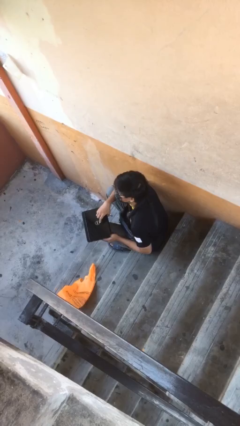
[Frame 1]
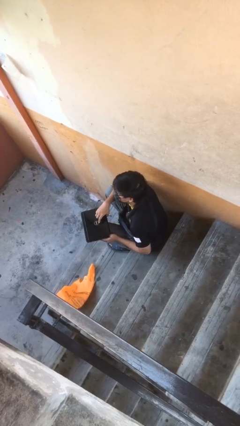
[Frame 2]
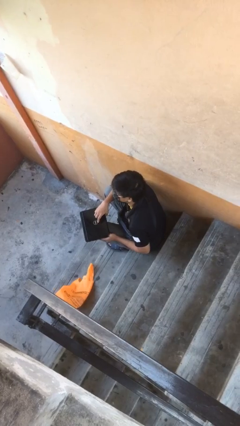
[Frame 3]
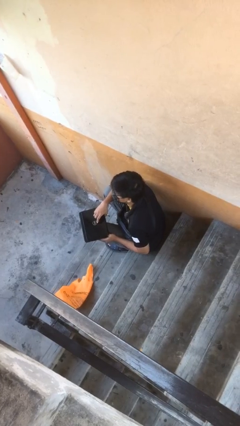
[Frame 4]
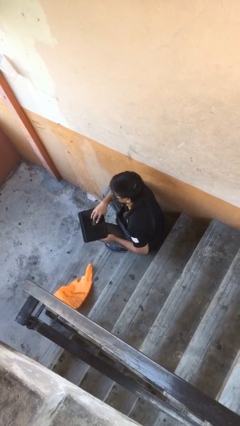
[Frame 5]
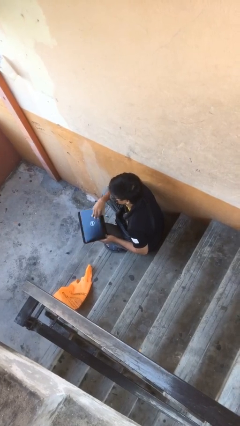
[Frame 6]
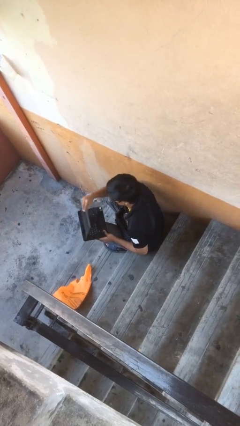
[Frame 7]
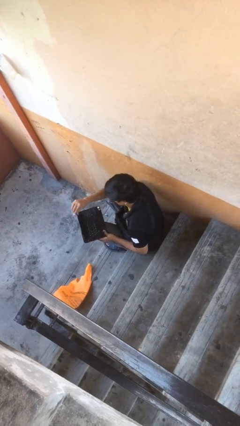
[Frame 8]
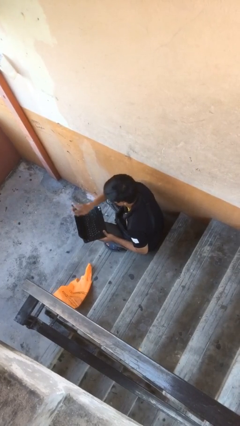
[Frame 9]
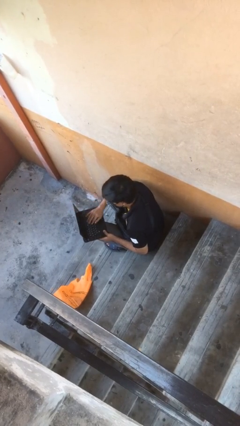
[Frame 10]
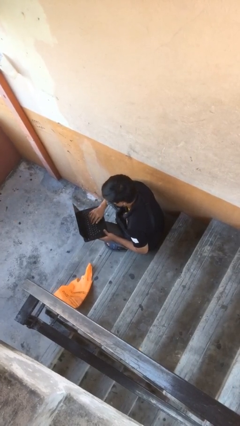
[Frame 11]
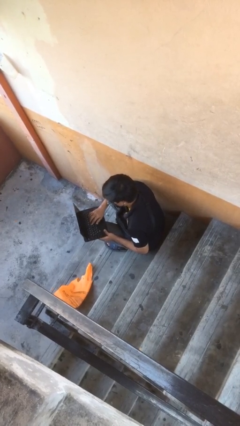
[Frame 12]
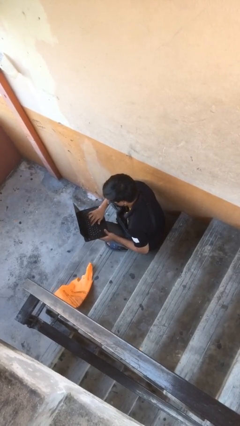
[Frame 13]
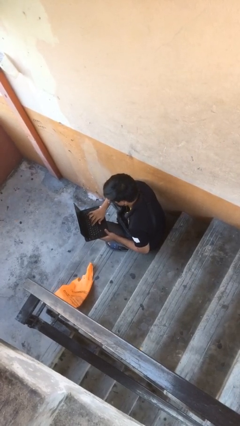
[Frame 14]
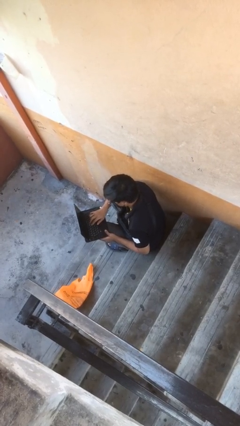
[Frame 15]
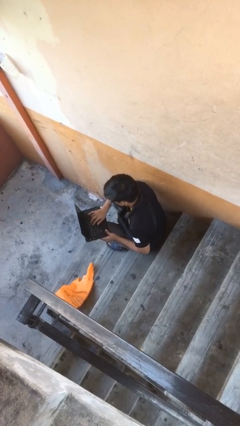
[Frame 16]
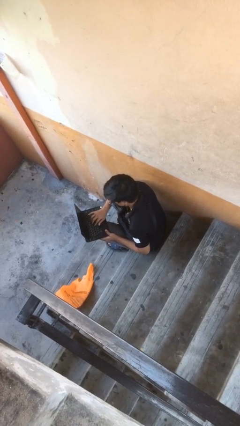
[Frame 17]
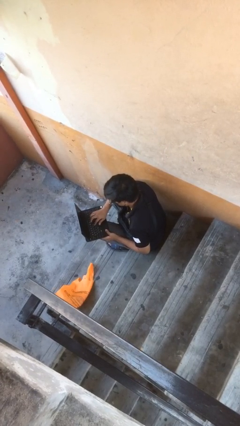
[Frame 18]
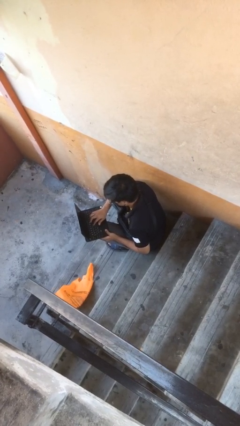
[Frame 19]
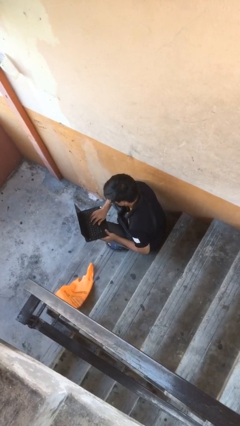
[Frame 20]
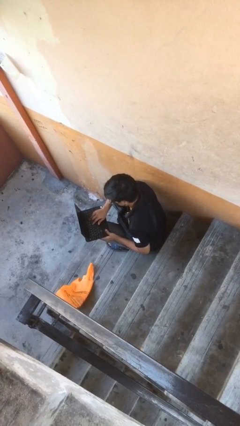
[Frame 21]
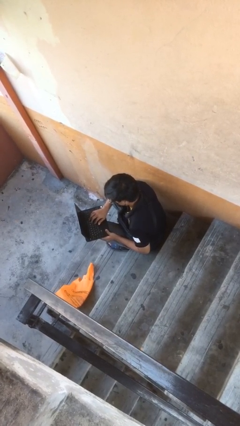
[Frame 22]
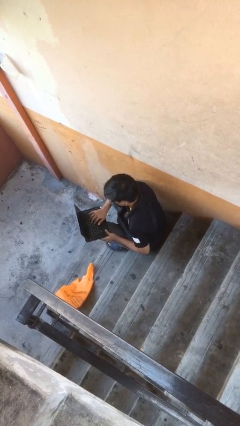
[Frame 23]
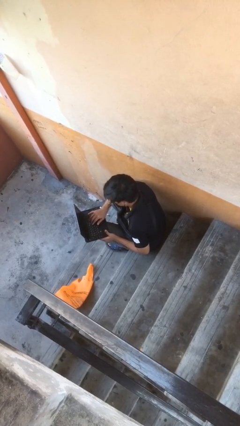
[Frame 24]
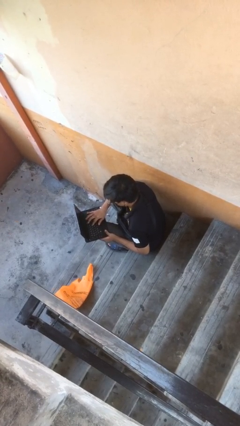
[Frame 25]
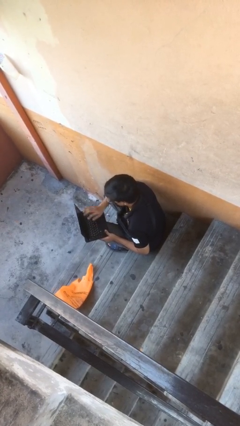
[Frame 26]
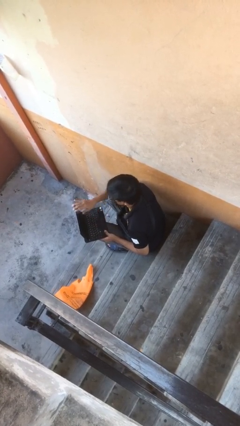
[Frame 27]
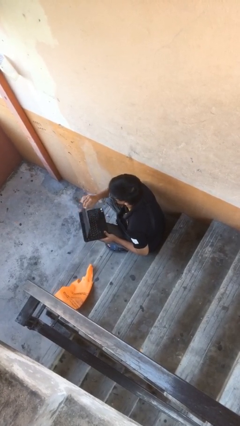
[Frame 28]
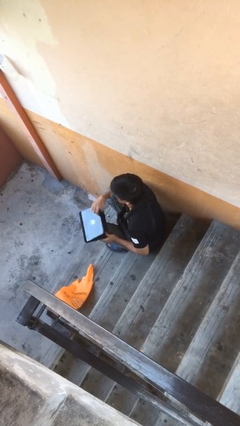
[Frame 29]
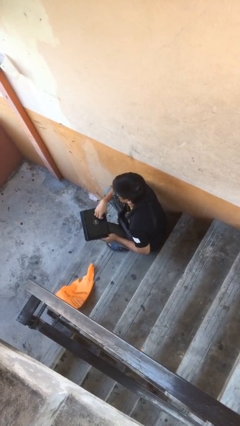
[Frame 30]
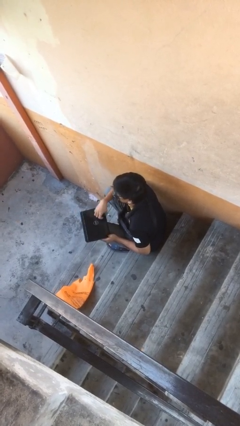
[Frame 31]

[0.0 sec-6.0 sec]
person interacts with laptop

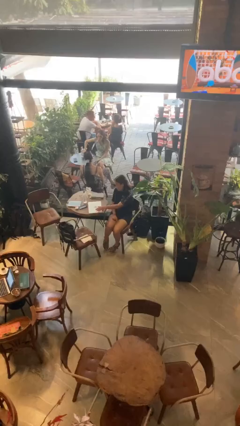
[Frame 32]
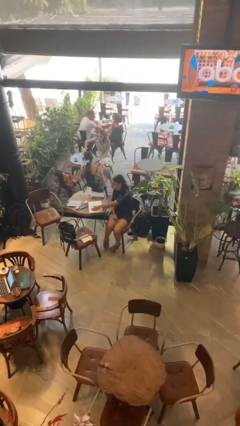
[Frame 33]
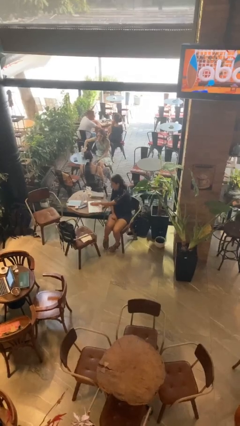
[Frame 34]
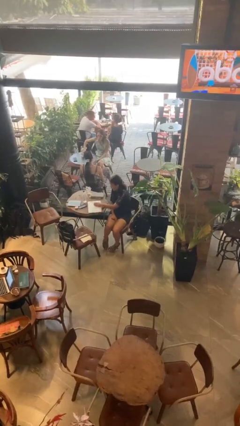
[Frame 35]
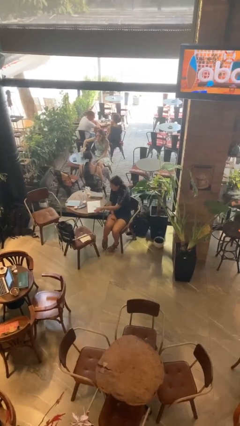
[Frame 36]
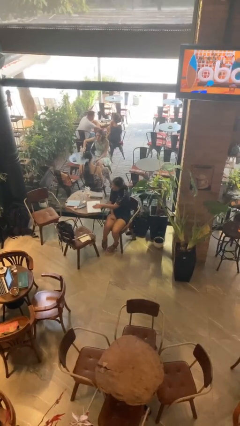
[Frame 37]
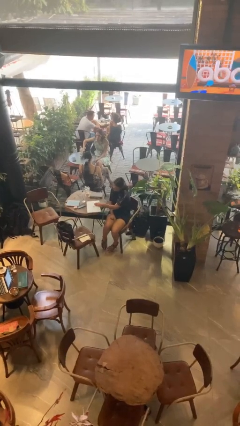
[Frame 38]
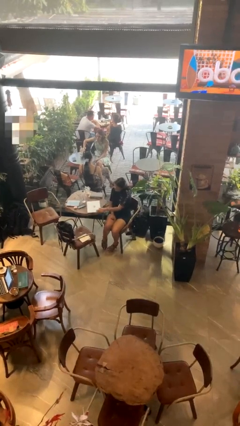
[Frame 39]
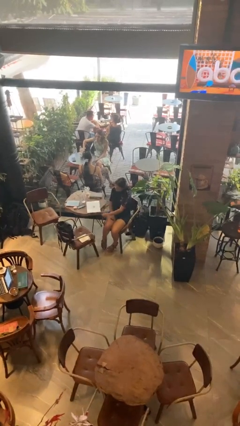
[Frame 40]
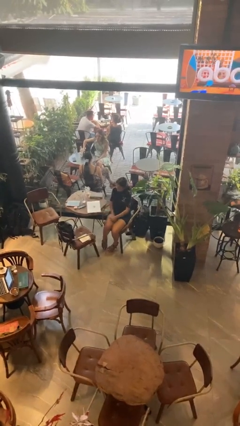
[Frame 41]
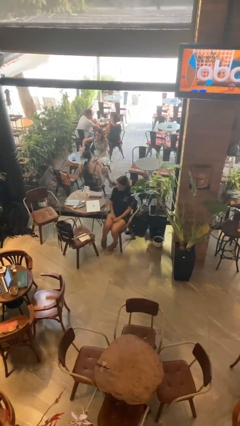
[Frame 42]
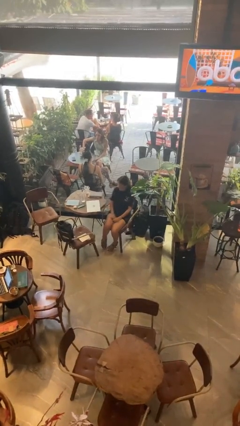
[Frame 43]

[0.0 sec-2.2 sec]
person waves hand over object

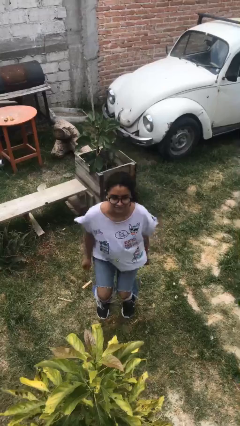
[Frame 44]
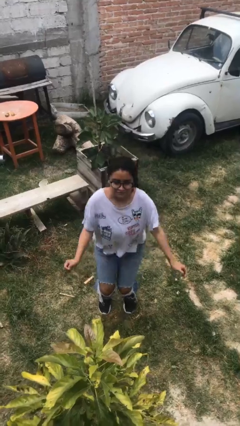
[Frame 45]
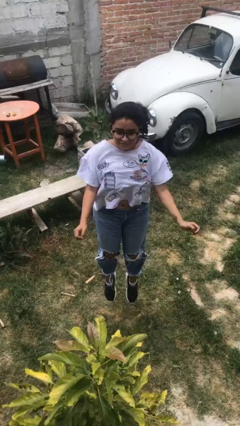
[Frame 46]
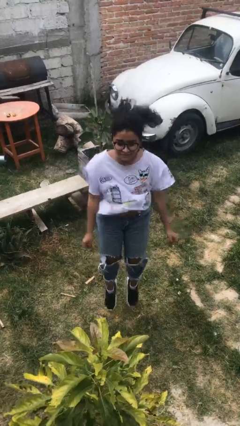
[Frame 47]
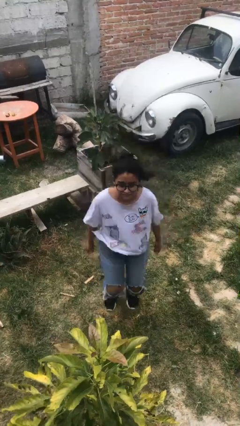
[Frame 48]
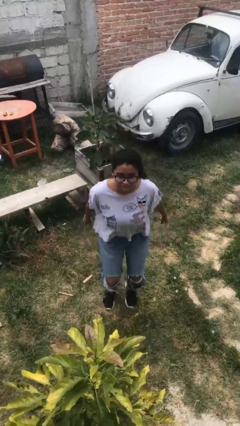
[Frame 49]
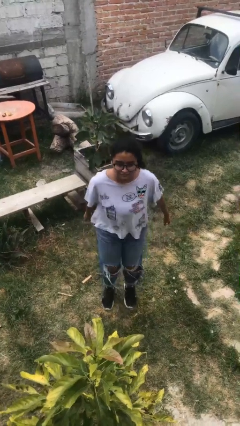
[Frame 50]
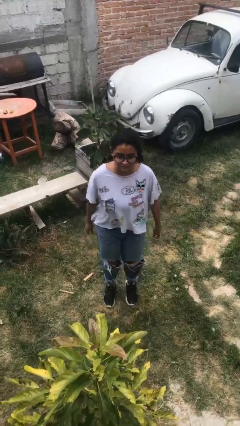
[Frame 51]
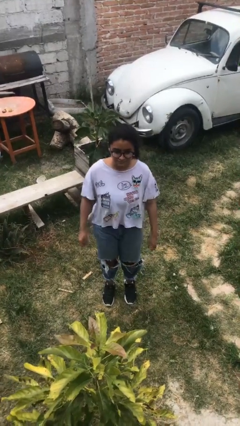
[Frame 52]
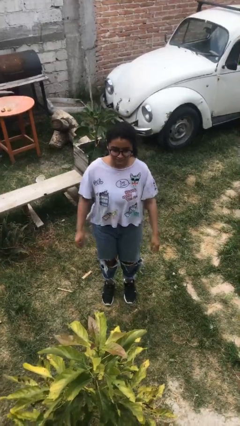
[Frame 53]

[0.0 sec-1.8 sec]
person jumps

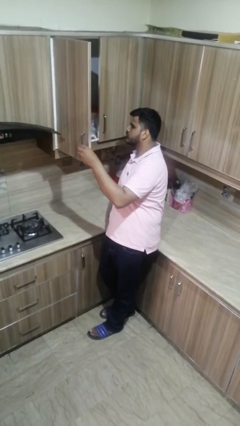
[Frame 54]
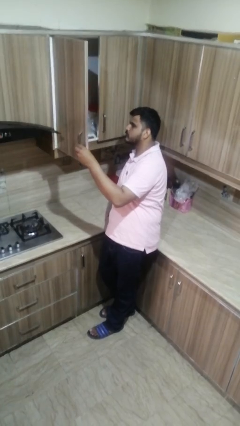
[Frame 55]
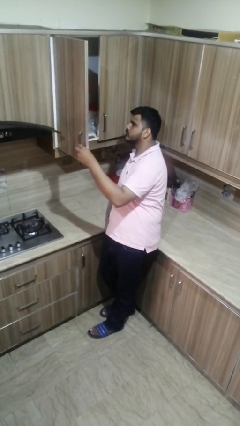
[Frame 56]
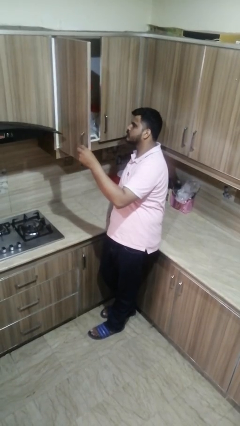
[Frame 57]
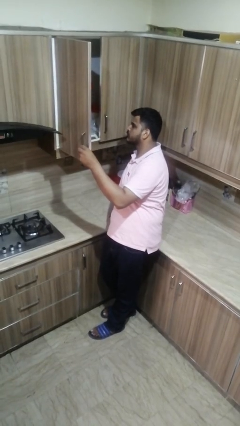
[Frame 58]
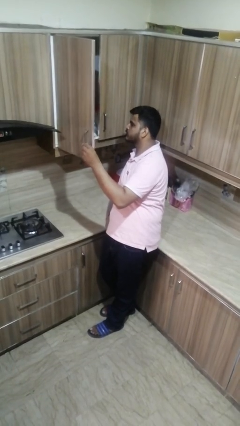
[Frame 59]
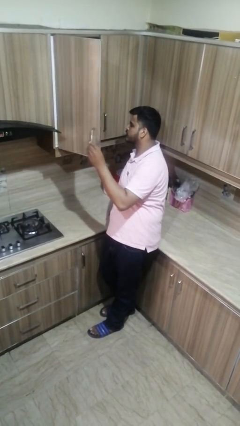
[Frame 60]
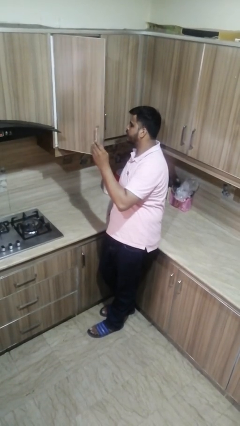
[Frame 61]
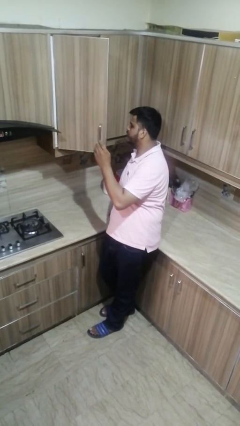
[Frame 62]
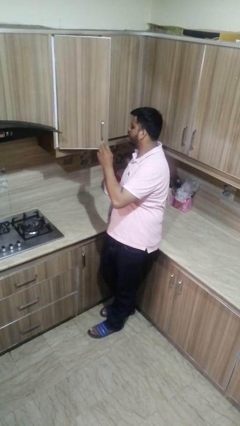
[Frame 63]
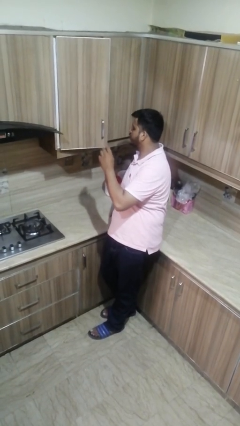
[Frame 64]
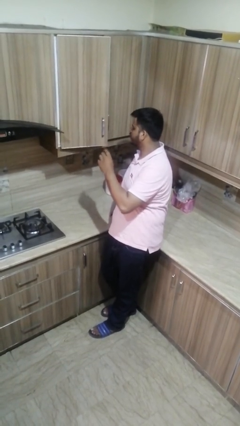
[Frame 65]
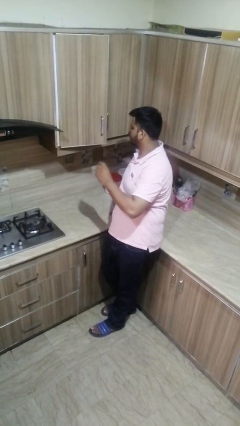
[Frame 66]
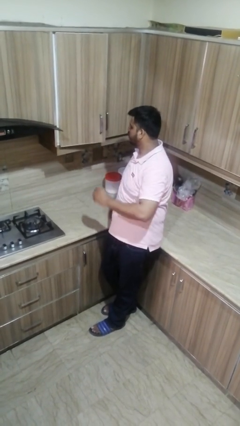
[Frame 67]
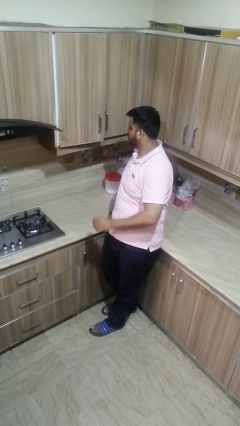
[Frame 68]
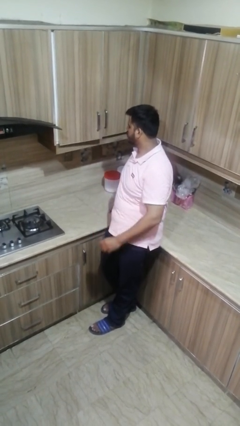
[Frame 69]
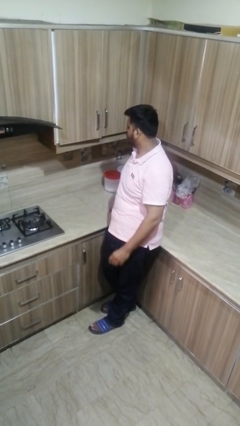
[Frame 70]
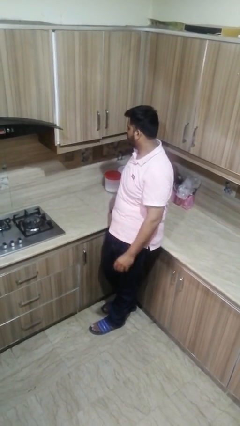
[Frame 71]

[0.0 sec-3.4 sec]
person closes cabinet

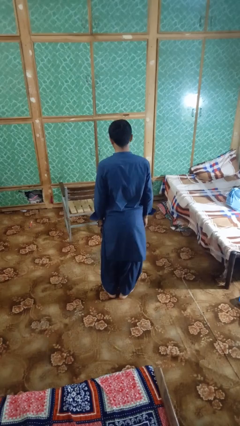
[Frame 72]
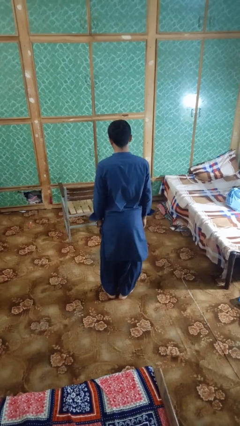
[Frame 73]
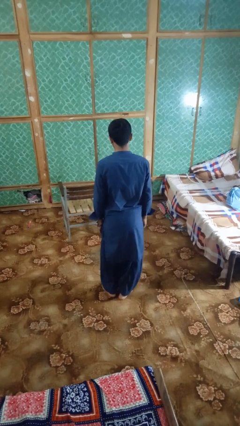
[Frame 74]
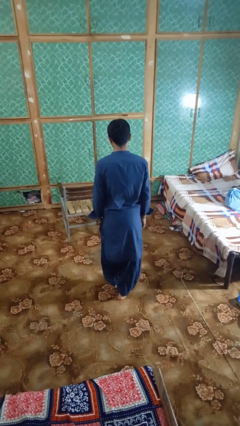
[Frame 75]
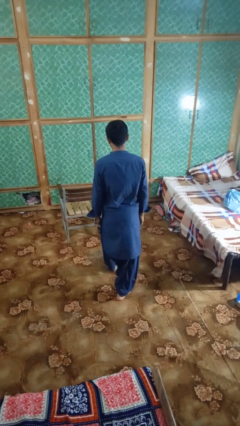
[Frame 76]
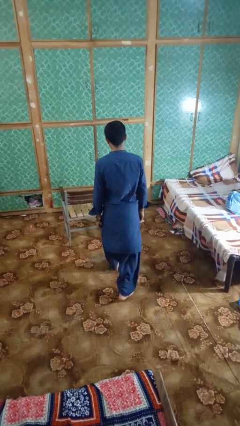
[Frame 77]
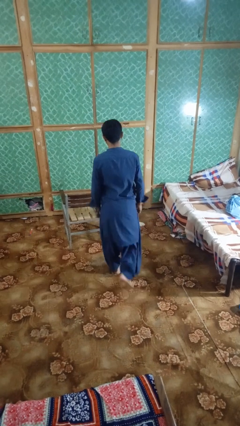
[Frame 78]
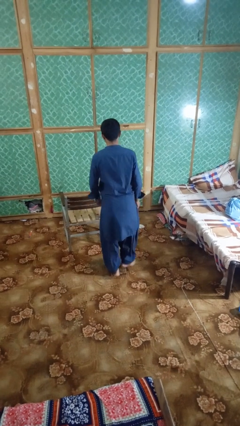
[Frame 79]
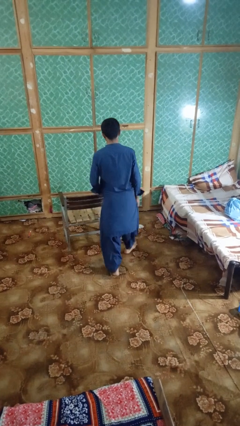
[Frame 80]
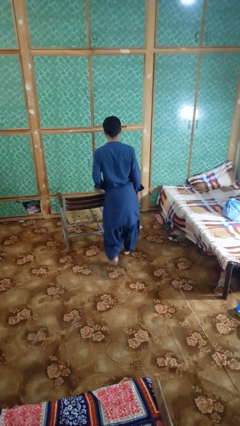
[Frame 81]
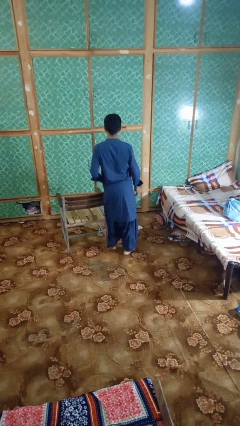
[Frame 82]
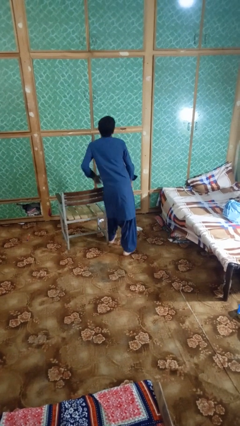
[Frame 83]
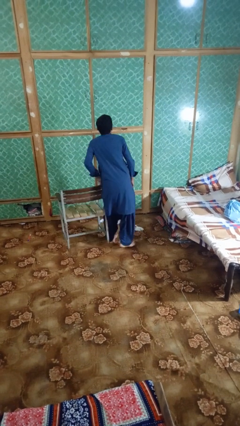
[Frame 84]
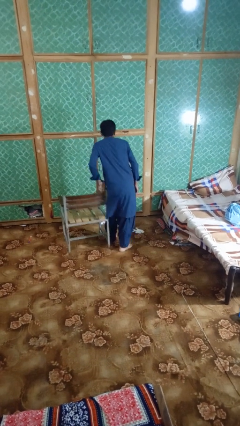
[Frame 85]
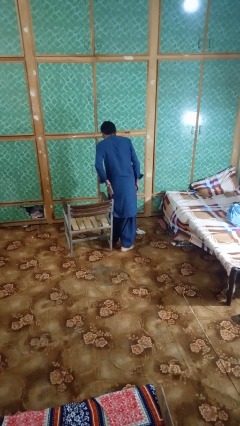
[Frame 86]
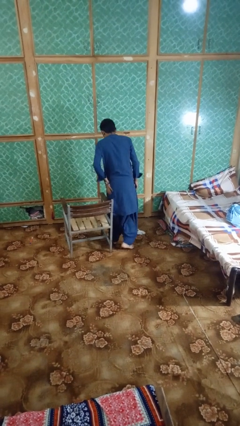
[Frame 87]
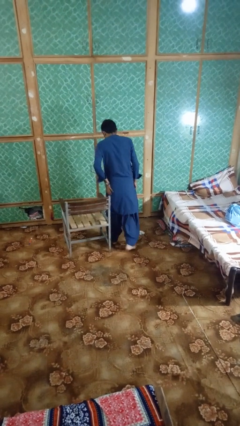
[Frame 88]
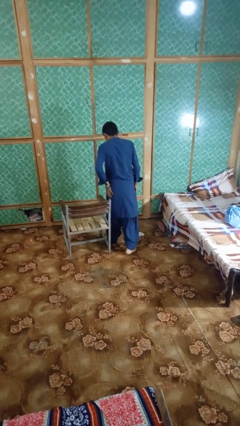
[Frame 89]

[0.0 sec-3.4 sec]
person bumps into table

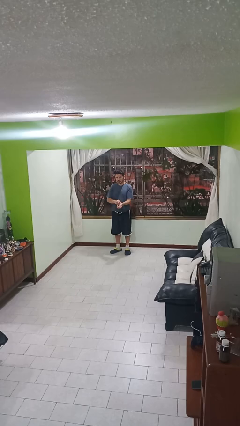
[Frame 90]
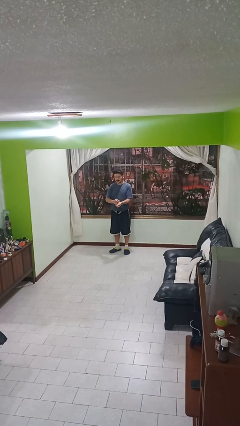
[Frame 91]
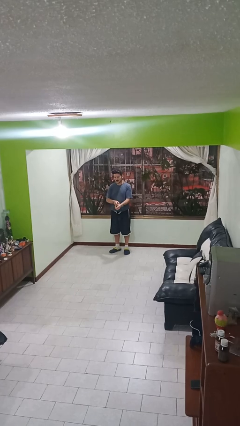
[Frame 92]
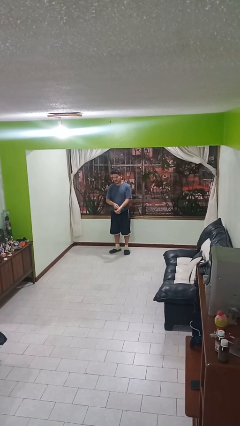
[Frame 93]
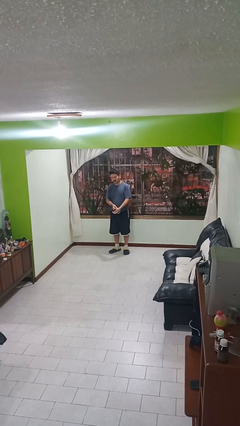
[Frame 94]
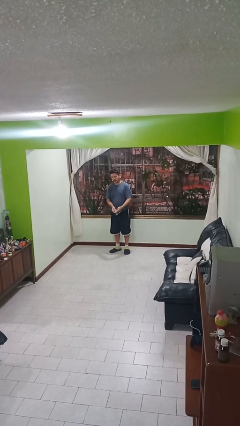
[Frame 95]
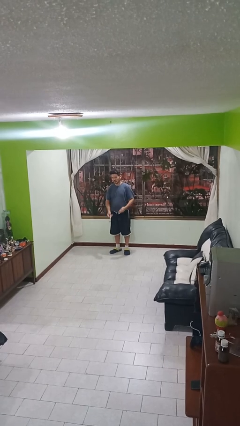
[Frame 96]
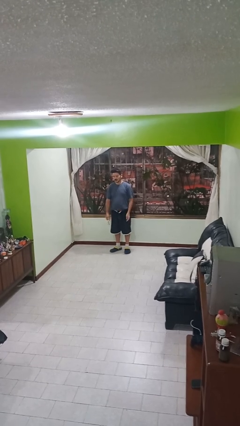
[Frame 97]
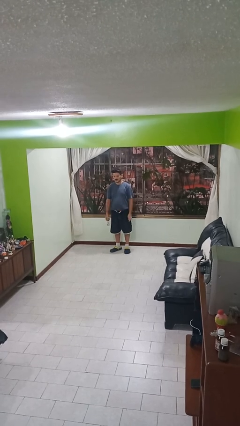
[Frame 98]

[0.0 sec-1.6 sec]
person takes off wristwatch
